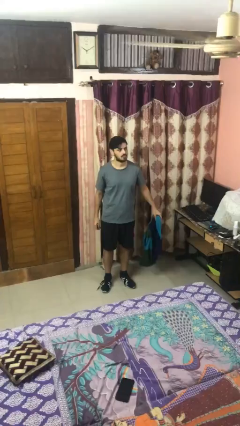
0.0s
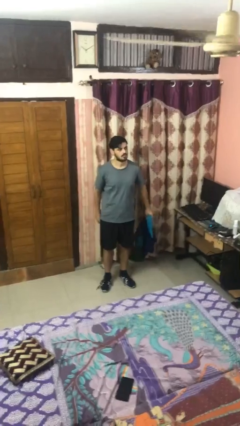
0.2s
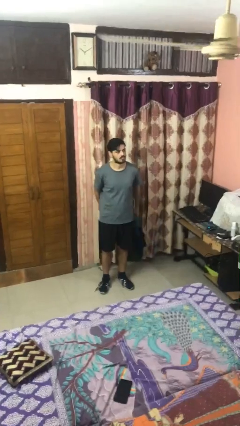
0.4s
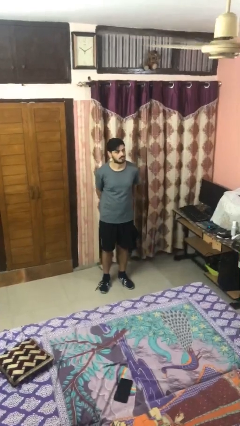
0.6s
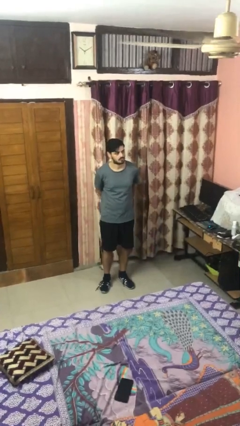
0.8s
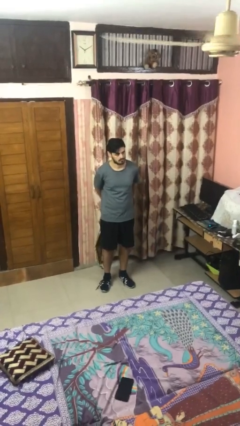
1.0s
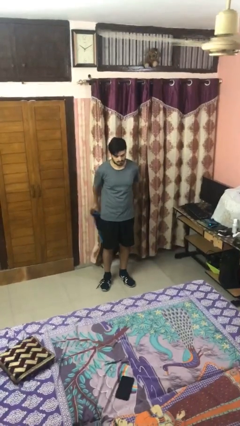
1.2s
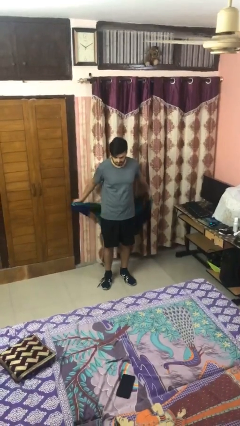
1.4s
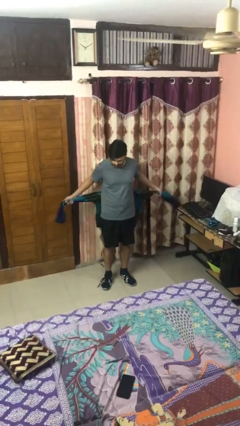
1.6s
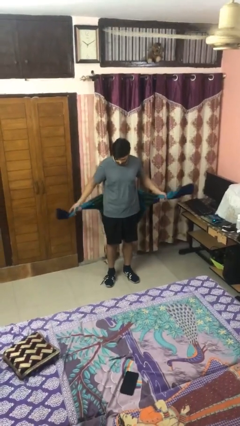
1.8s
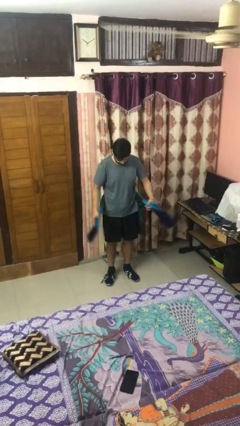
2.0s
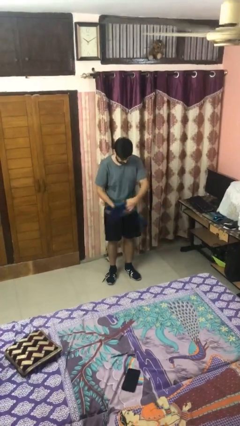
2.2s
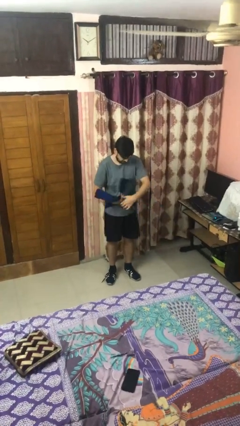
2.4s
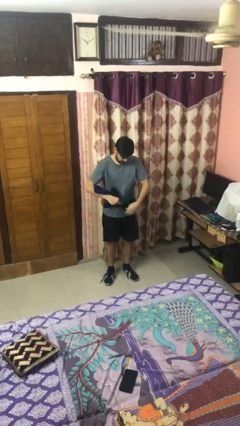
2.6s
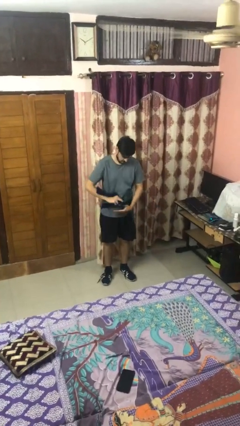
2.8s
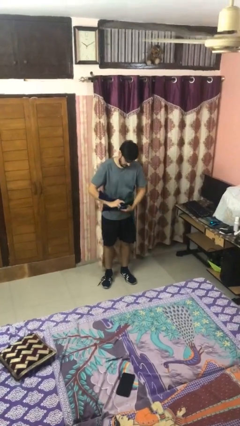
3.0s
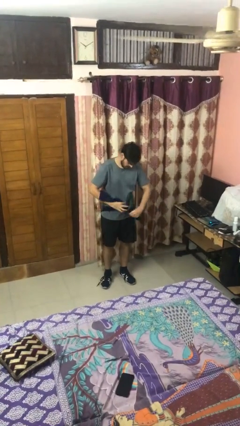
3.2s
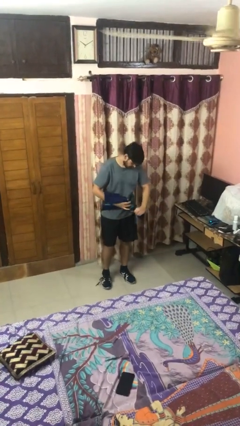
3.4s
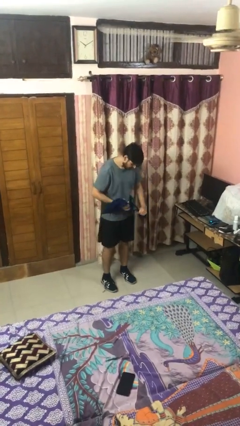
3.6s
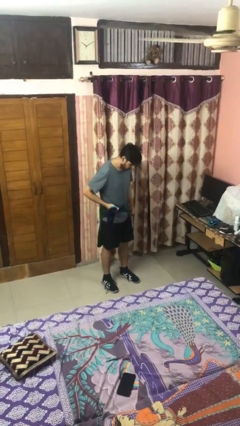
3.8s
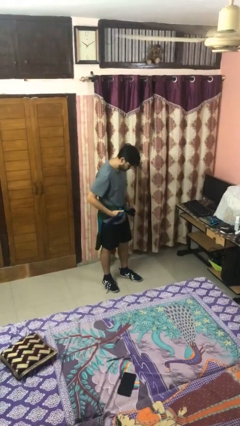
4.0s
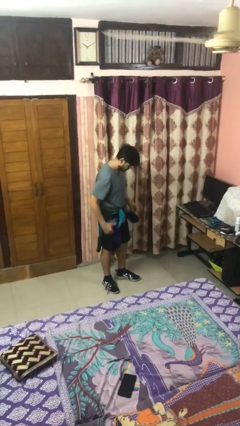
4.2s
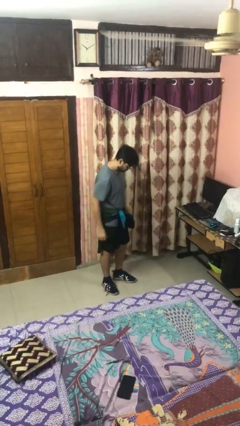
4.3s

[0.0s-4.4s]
person ties jacket around waist

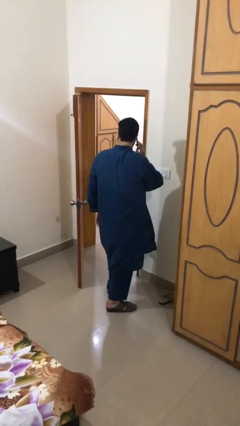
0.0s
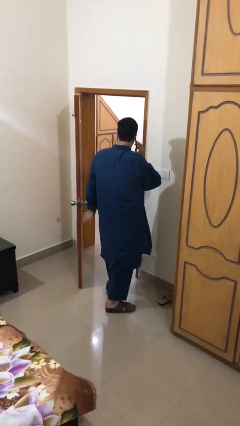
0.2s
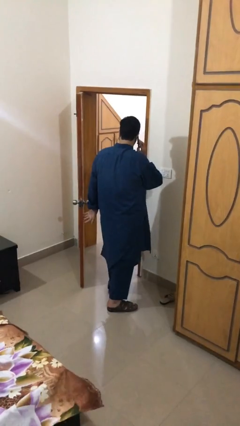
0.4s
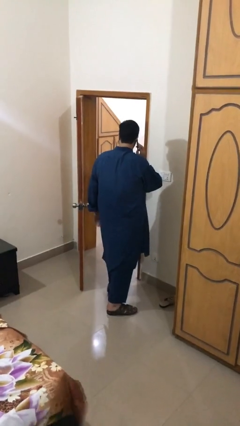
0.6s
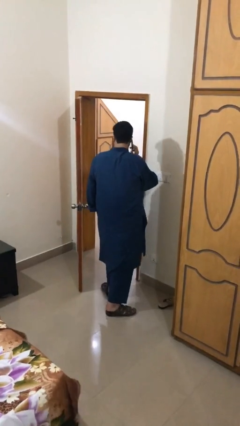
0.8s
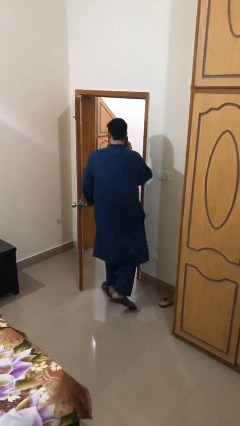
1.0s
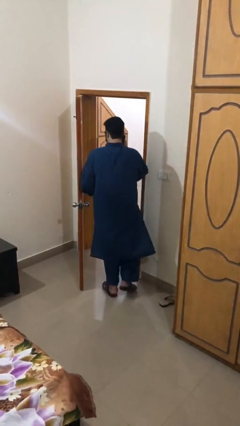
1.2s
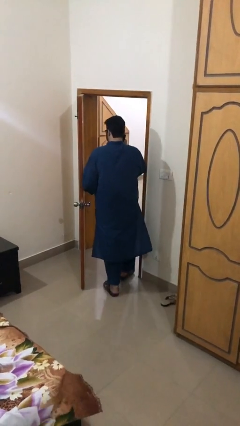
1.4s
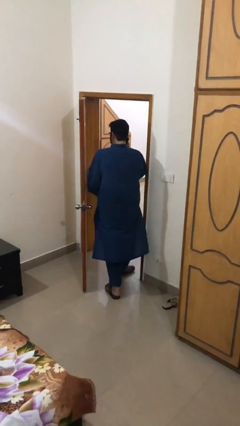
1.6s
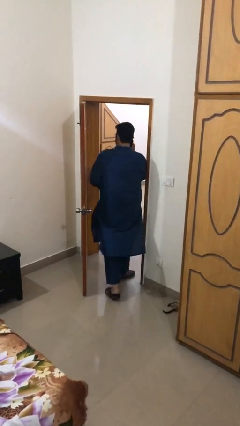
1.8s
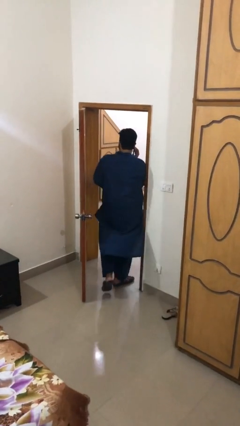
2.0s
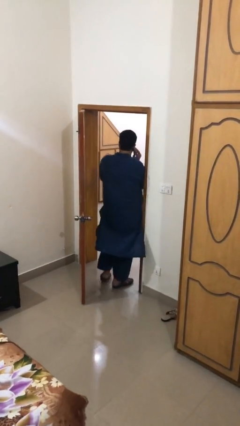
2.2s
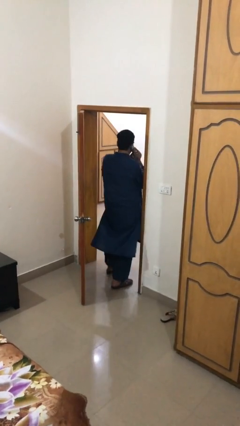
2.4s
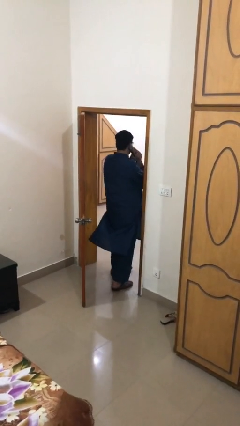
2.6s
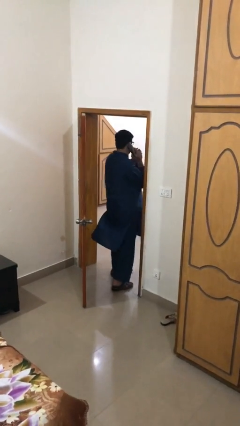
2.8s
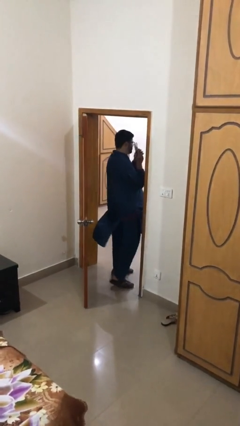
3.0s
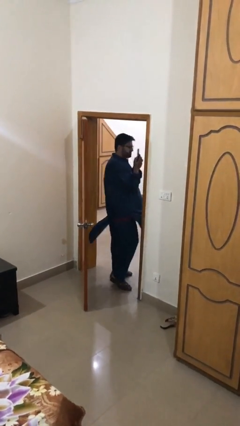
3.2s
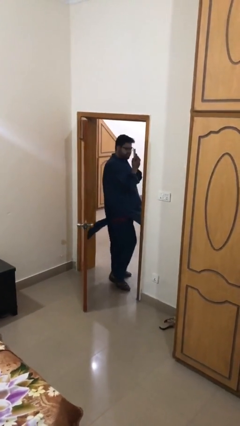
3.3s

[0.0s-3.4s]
person exits scene through structure

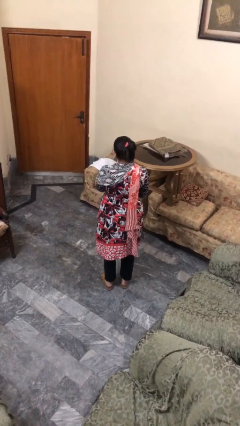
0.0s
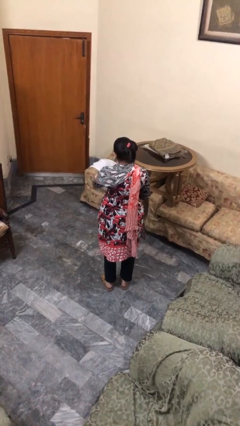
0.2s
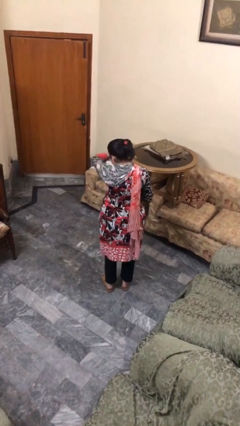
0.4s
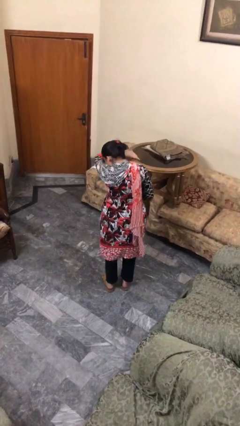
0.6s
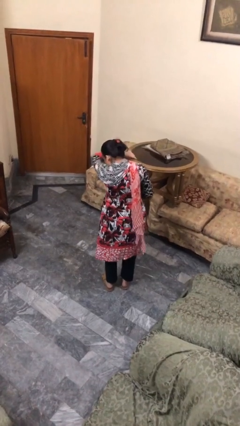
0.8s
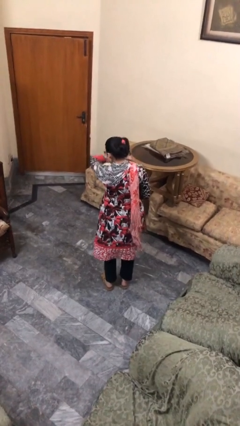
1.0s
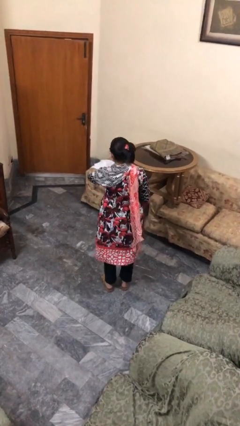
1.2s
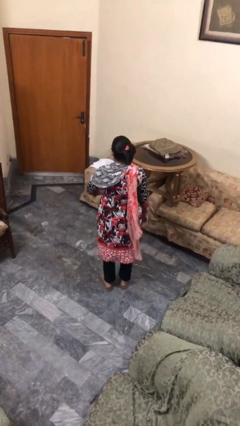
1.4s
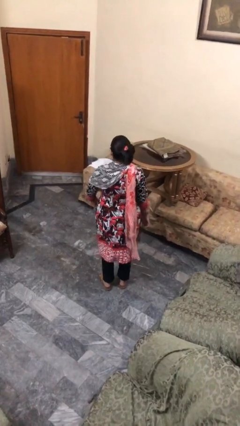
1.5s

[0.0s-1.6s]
person sneezes into arm

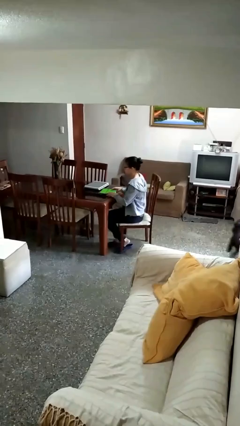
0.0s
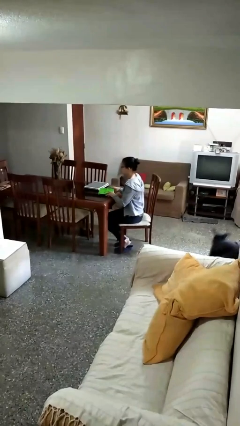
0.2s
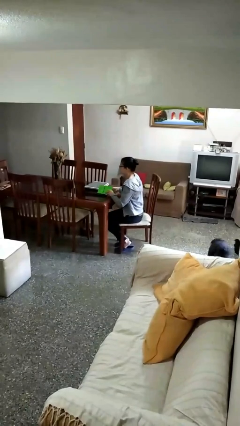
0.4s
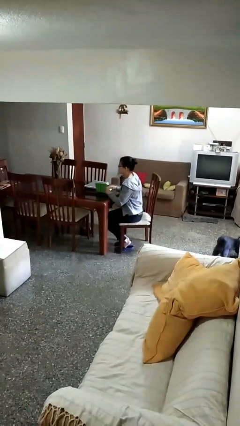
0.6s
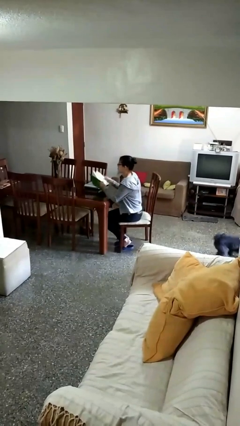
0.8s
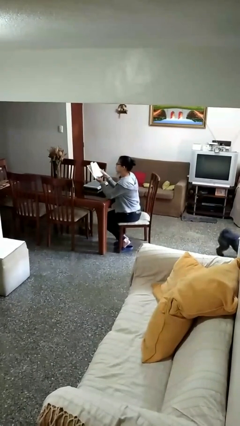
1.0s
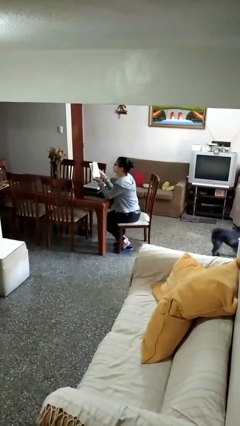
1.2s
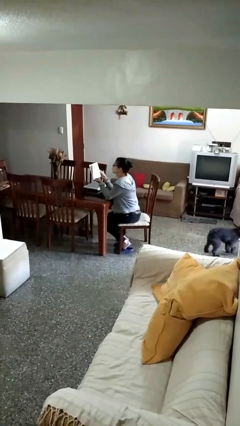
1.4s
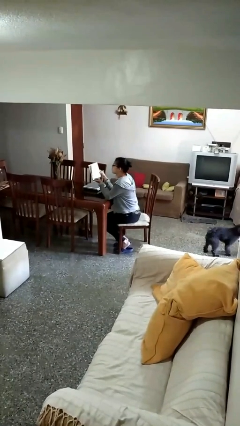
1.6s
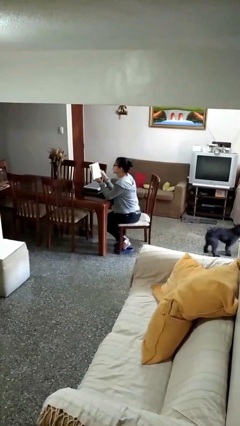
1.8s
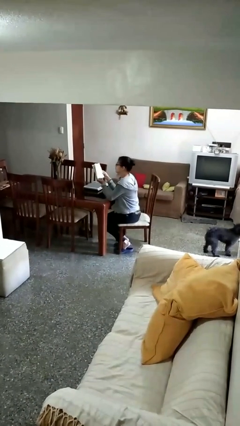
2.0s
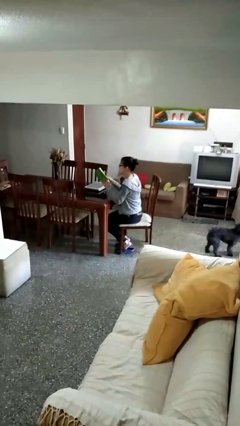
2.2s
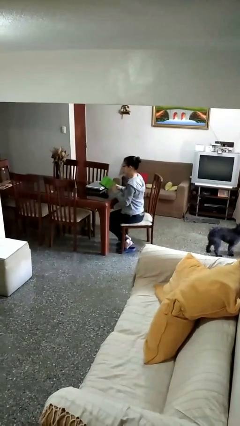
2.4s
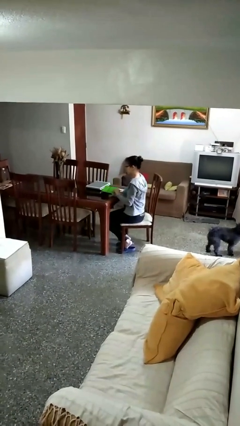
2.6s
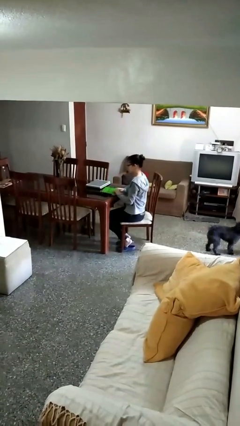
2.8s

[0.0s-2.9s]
person reads document

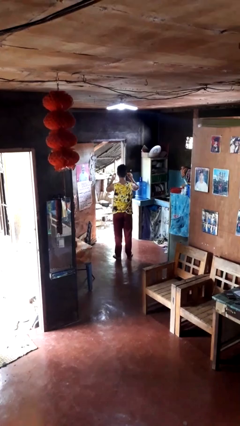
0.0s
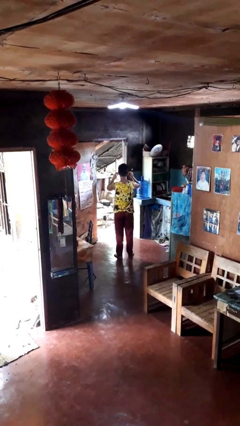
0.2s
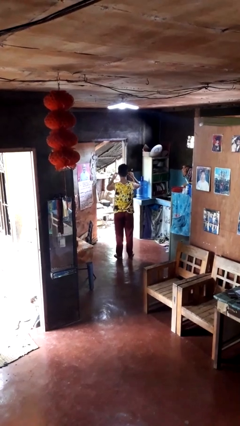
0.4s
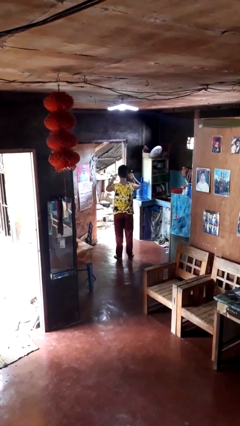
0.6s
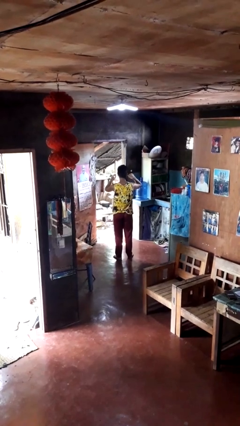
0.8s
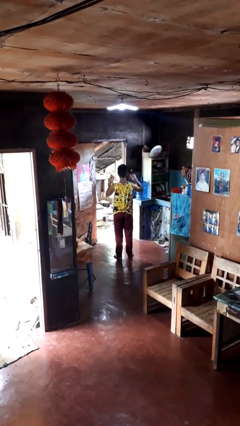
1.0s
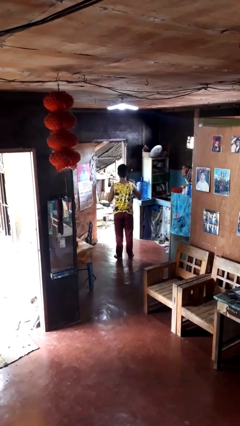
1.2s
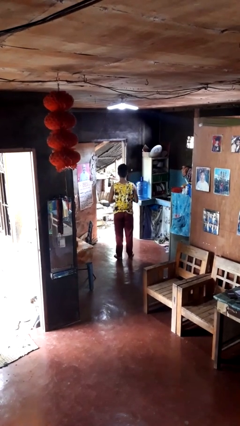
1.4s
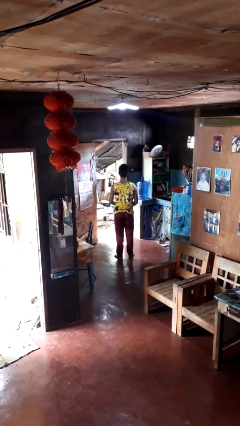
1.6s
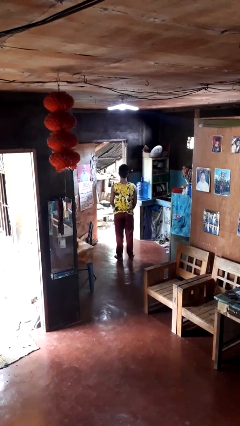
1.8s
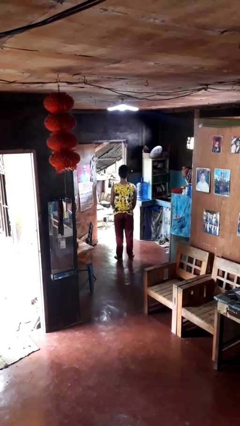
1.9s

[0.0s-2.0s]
person takes off headphones

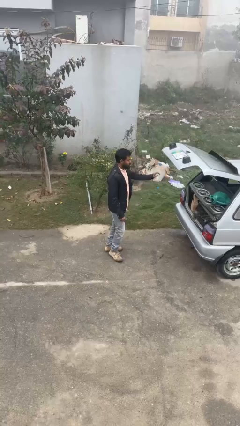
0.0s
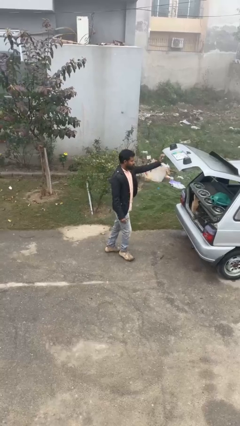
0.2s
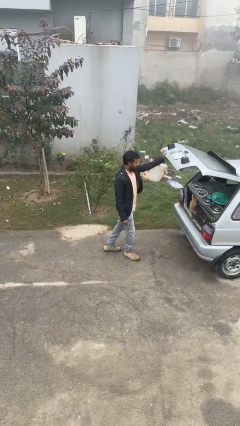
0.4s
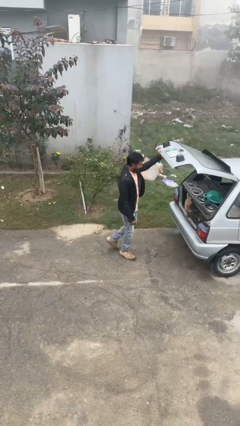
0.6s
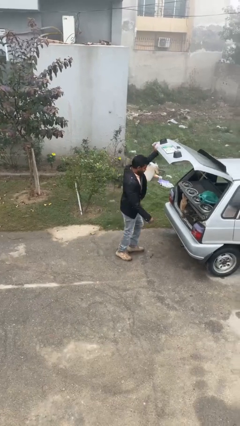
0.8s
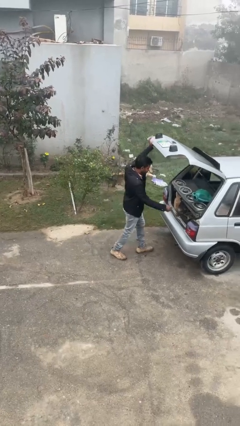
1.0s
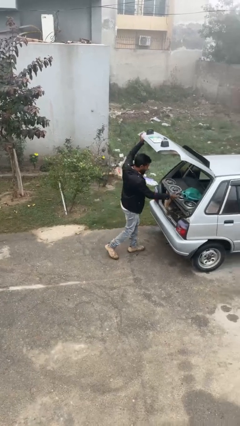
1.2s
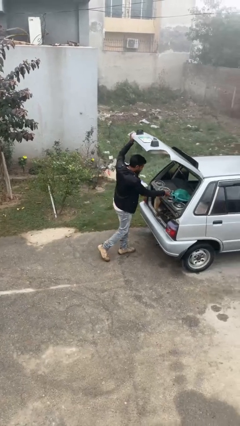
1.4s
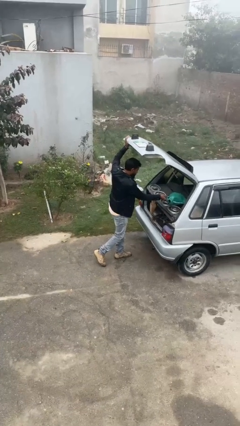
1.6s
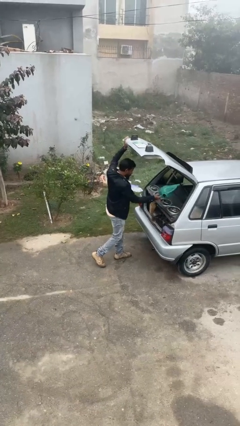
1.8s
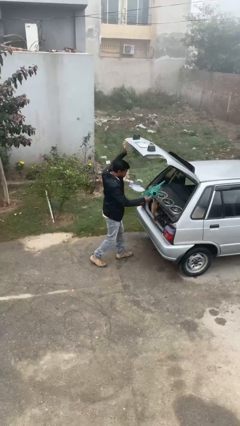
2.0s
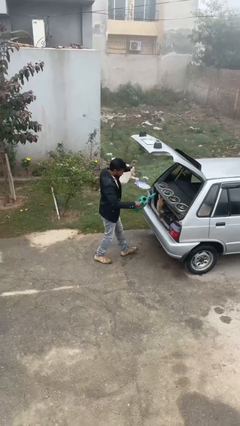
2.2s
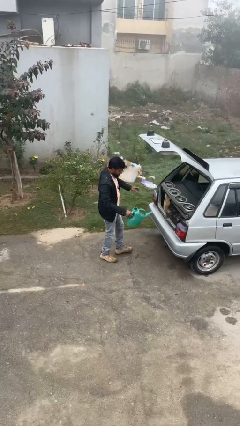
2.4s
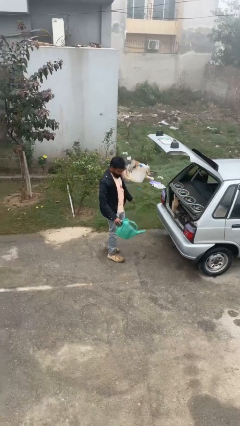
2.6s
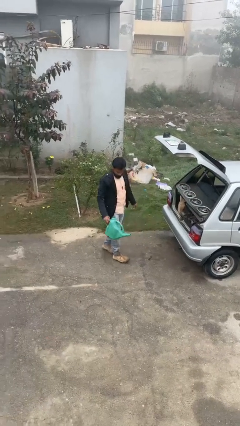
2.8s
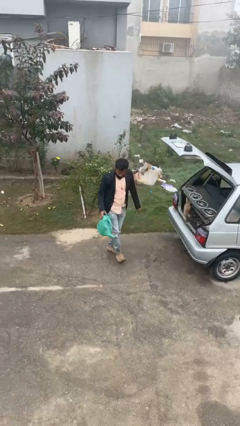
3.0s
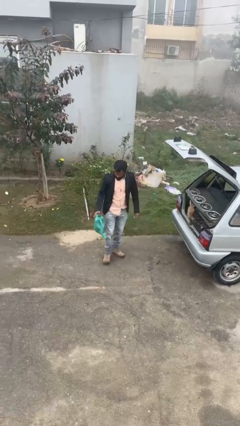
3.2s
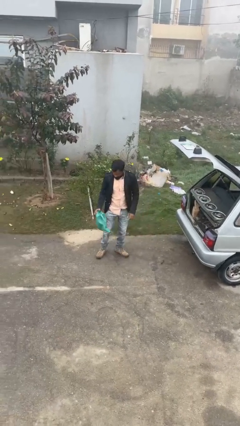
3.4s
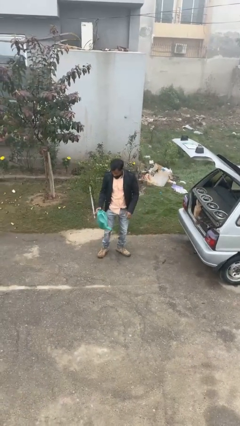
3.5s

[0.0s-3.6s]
person unloads car
